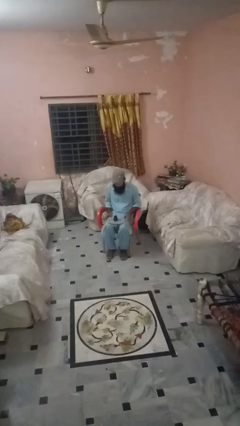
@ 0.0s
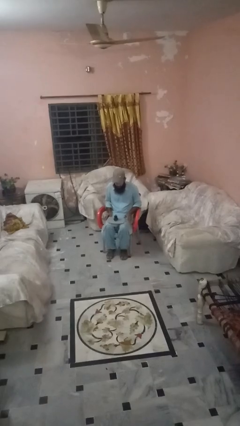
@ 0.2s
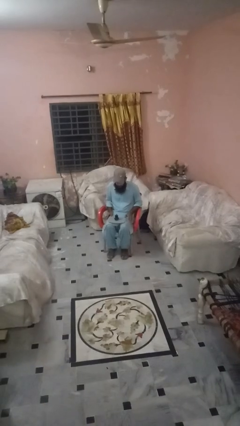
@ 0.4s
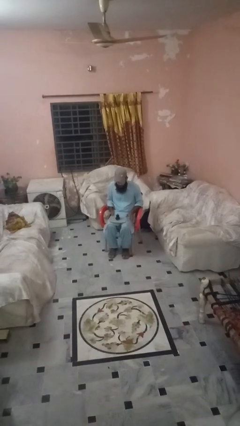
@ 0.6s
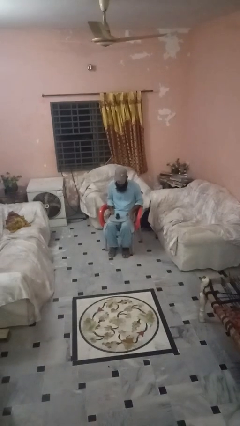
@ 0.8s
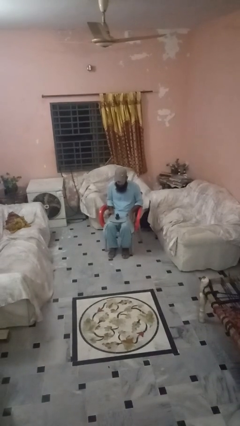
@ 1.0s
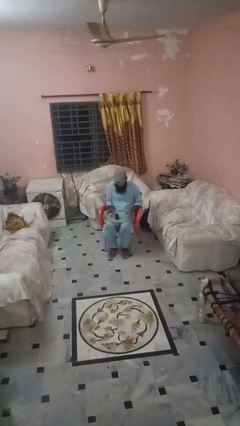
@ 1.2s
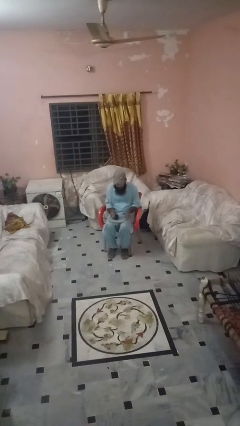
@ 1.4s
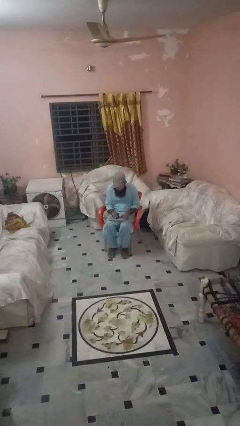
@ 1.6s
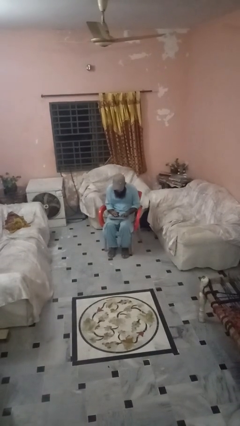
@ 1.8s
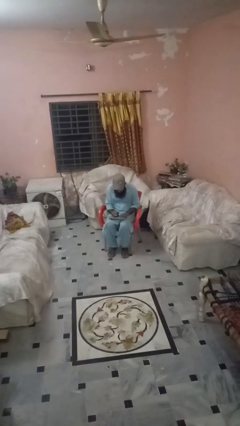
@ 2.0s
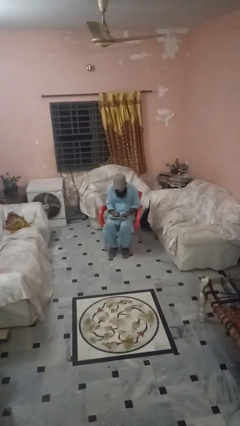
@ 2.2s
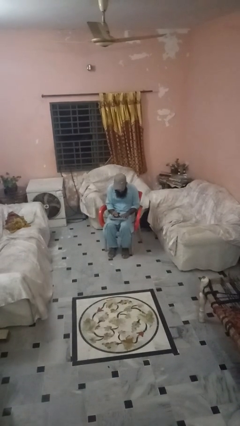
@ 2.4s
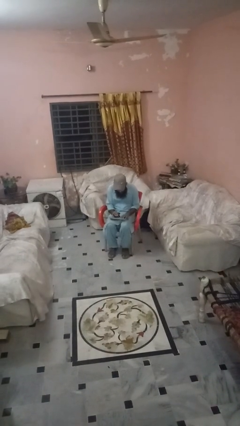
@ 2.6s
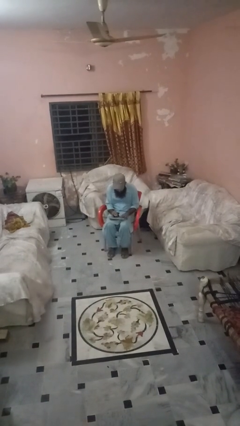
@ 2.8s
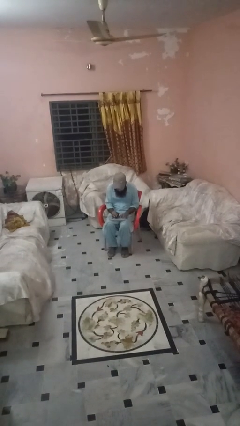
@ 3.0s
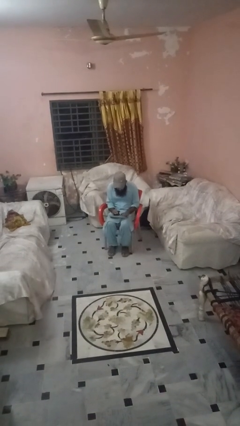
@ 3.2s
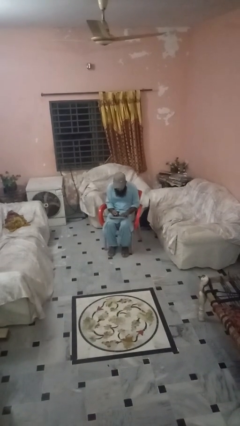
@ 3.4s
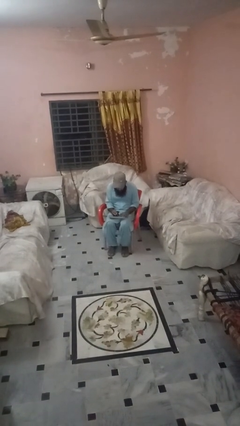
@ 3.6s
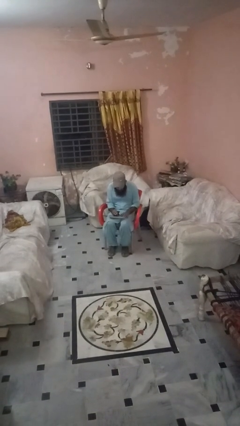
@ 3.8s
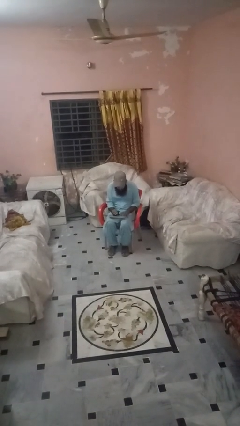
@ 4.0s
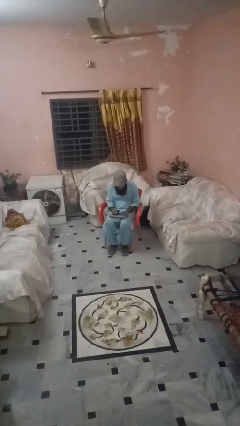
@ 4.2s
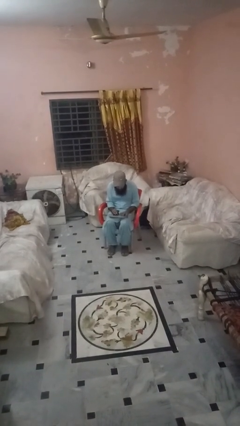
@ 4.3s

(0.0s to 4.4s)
person interacts with handheld game

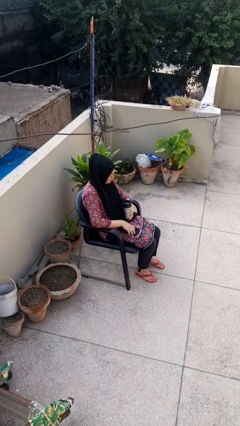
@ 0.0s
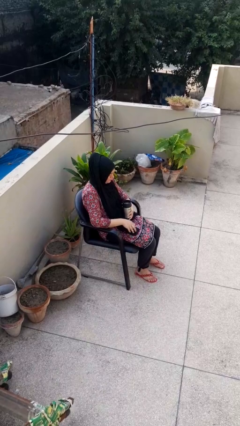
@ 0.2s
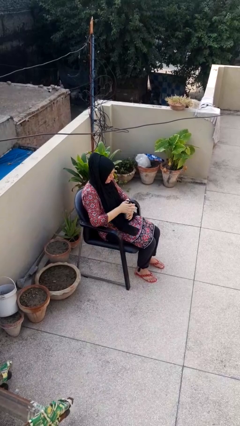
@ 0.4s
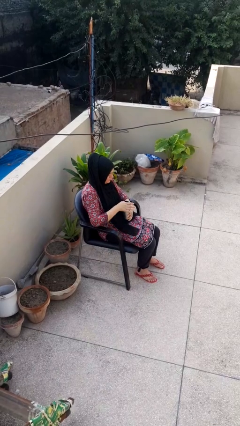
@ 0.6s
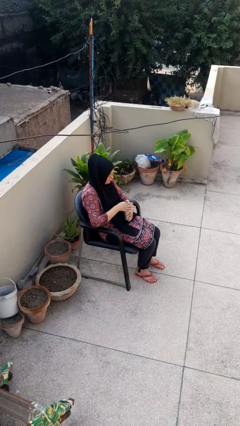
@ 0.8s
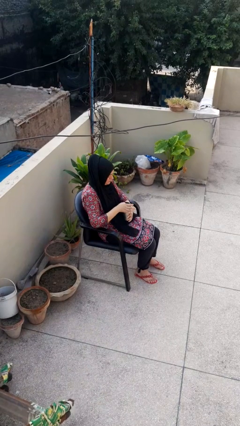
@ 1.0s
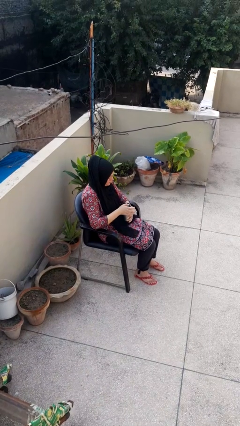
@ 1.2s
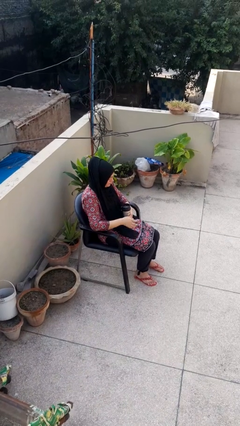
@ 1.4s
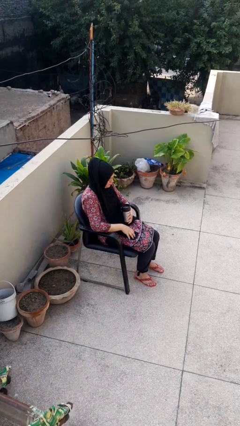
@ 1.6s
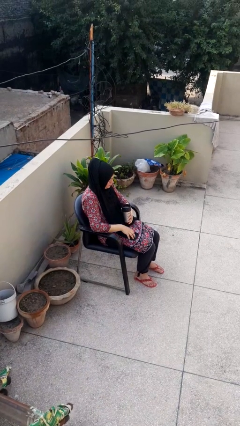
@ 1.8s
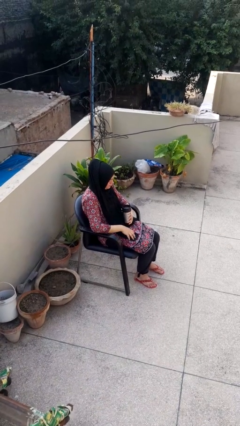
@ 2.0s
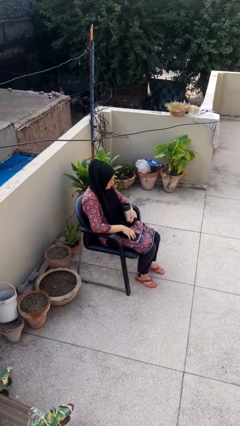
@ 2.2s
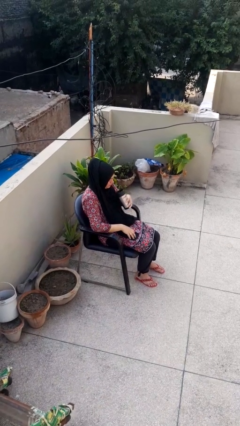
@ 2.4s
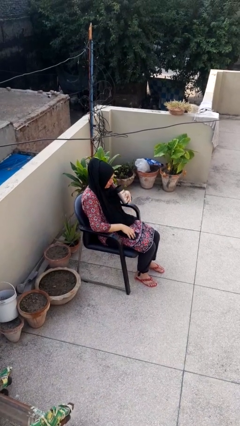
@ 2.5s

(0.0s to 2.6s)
person opens beverage can

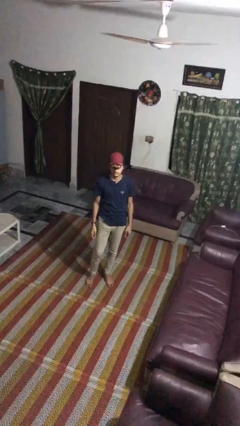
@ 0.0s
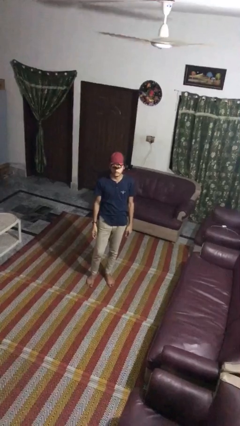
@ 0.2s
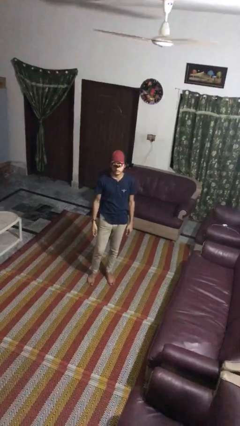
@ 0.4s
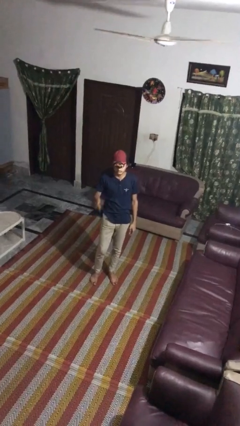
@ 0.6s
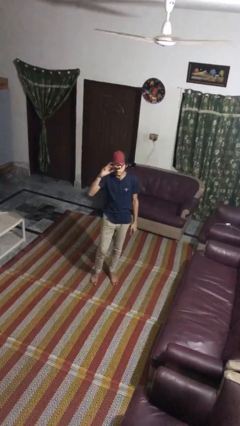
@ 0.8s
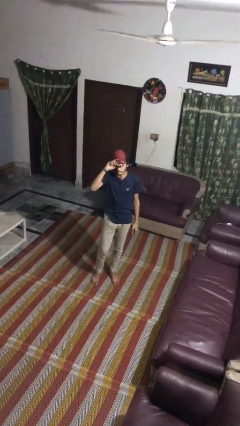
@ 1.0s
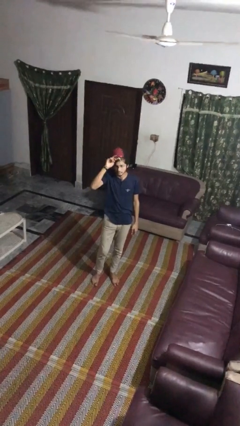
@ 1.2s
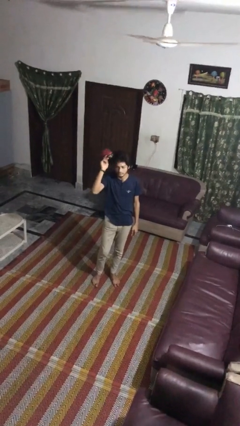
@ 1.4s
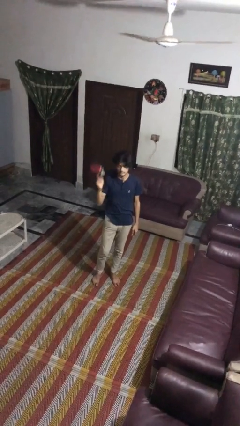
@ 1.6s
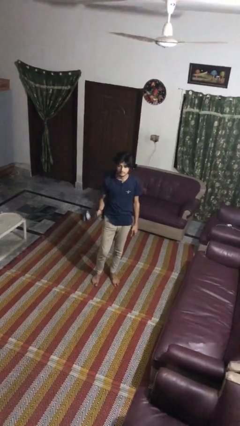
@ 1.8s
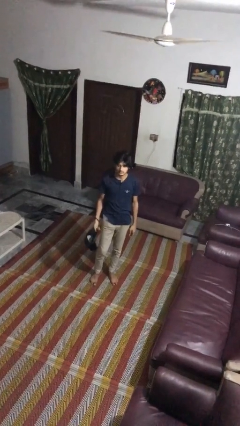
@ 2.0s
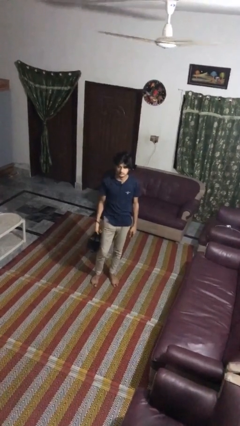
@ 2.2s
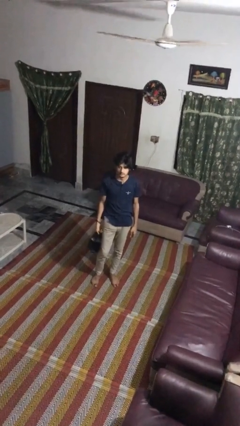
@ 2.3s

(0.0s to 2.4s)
person takes off hat

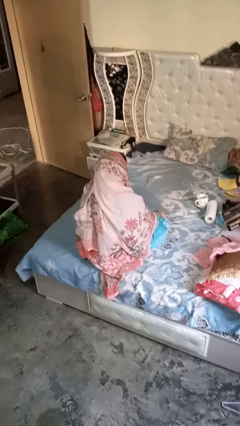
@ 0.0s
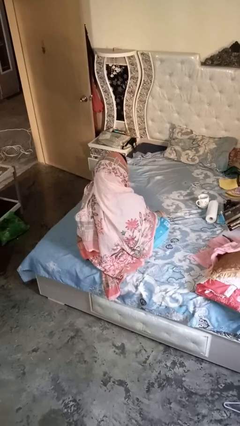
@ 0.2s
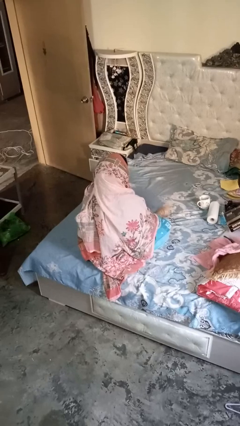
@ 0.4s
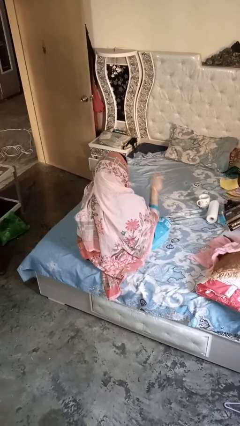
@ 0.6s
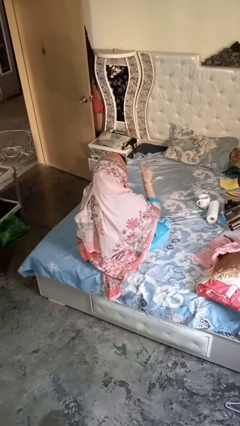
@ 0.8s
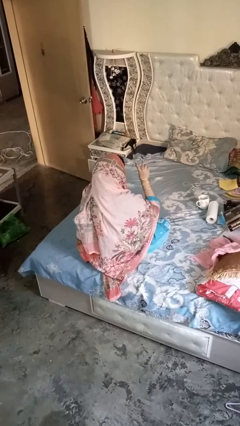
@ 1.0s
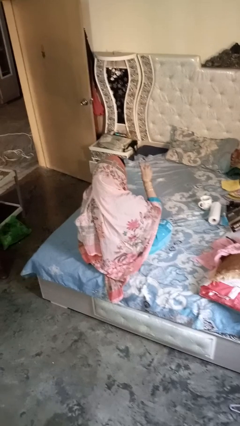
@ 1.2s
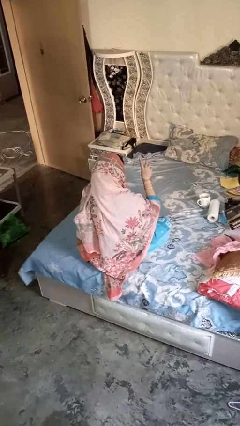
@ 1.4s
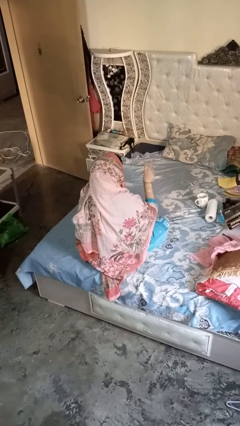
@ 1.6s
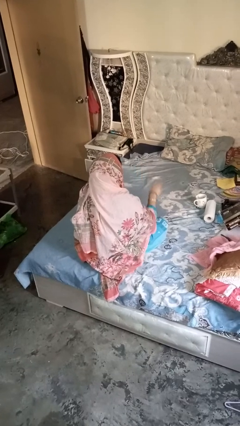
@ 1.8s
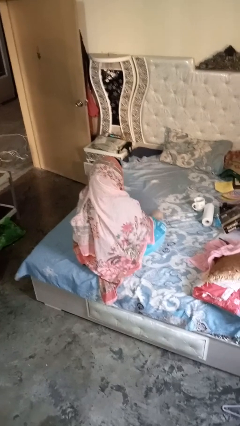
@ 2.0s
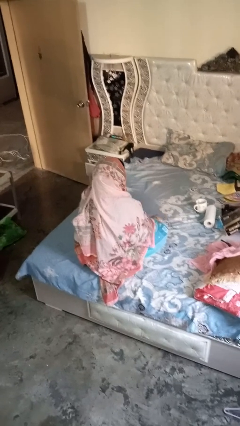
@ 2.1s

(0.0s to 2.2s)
person gestures be quiet

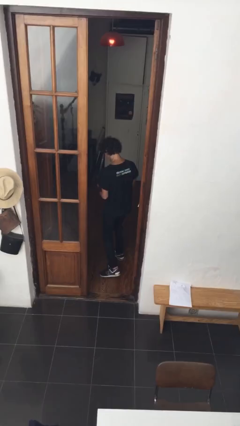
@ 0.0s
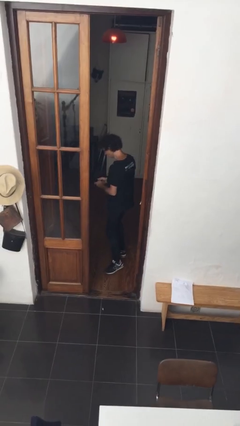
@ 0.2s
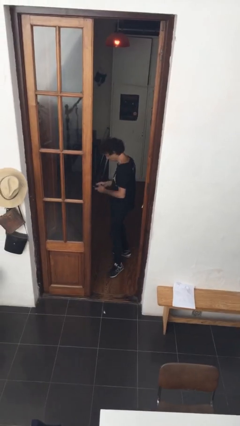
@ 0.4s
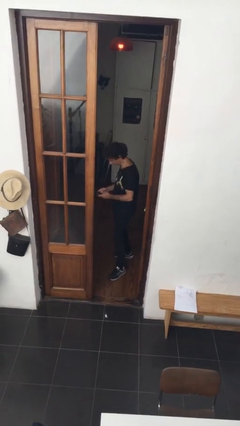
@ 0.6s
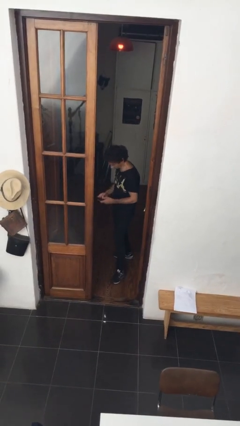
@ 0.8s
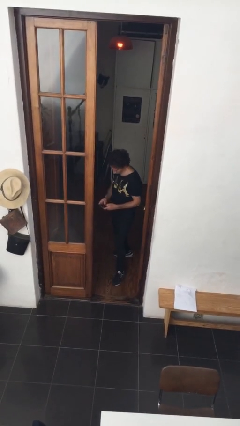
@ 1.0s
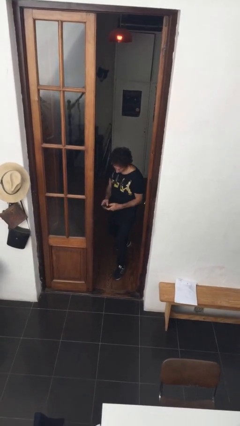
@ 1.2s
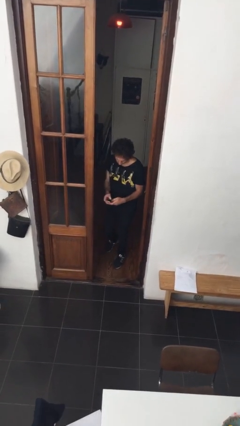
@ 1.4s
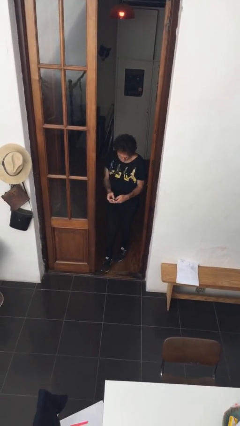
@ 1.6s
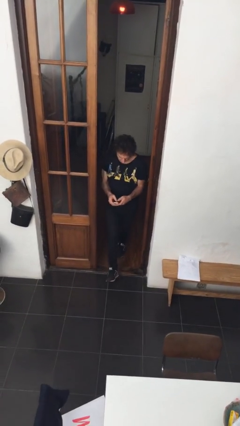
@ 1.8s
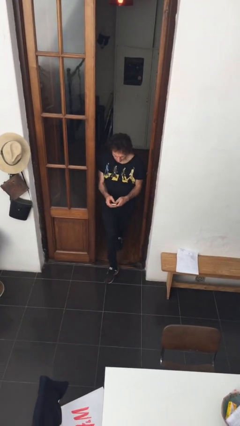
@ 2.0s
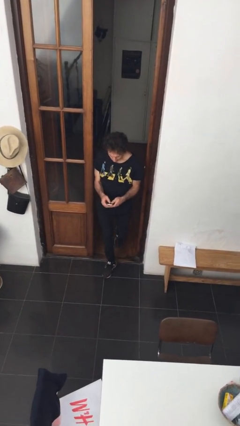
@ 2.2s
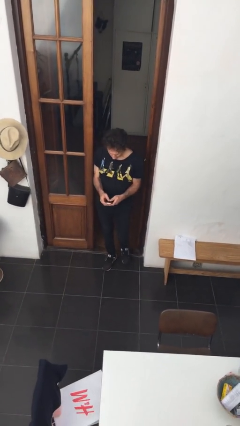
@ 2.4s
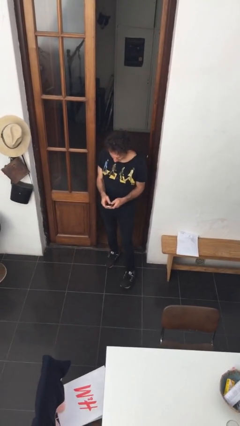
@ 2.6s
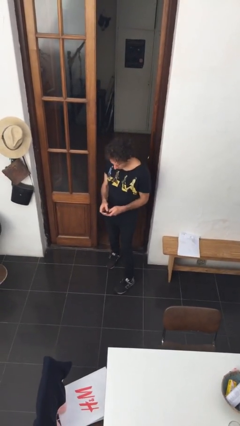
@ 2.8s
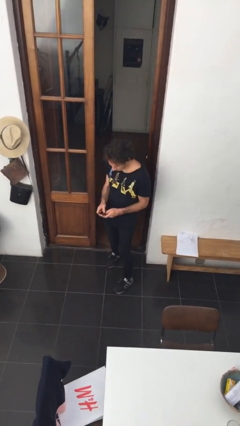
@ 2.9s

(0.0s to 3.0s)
person enters scene through structure

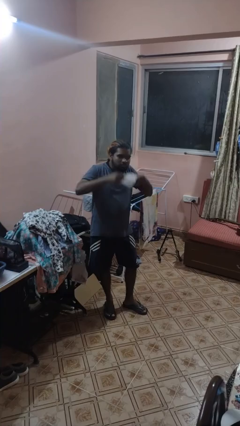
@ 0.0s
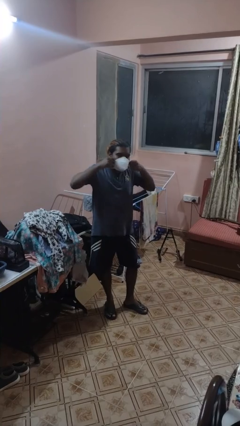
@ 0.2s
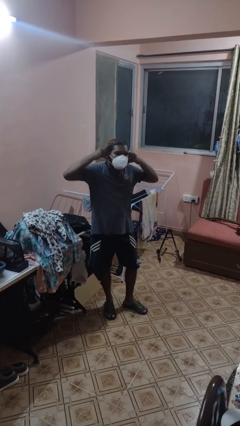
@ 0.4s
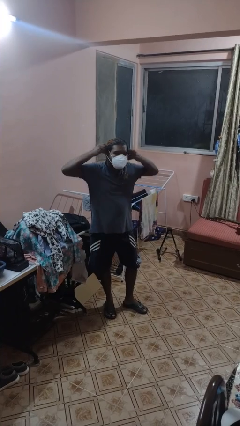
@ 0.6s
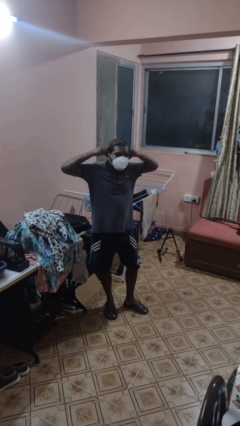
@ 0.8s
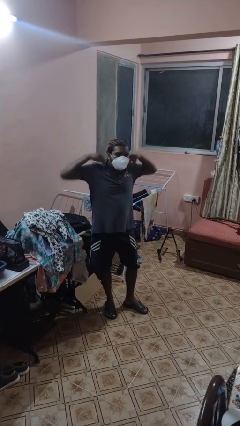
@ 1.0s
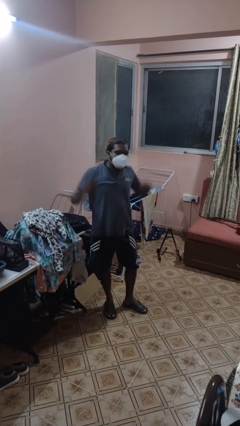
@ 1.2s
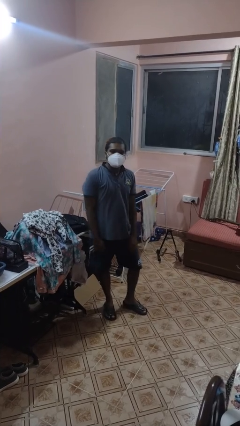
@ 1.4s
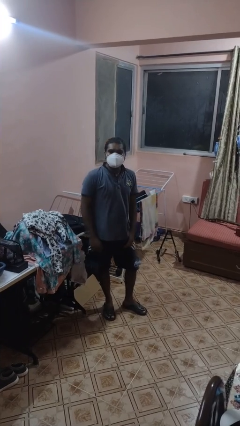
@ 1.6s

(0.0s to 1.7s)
person puts on facemask

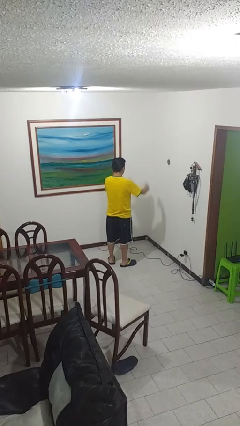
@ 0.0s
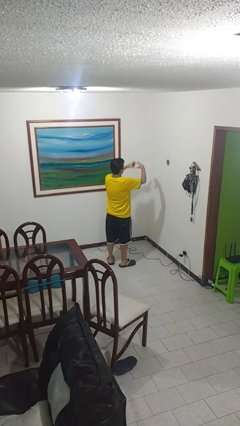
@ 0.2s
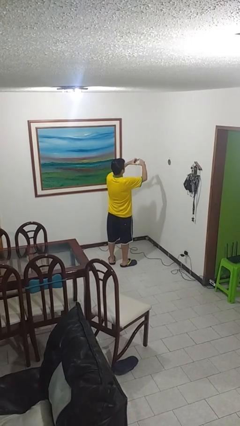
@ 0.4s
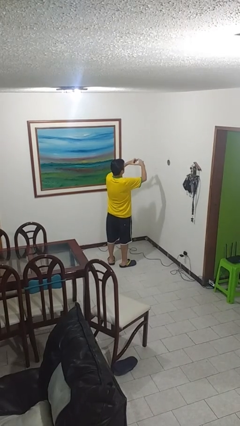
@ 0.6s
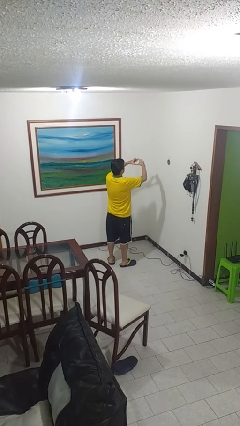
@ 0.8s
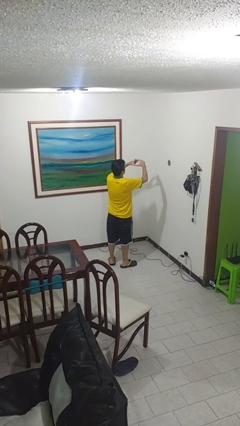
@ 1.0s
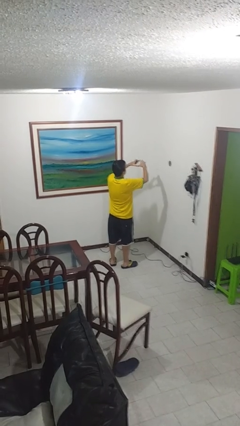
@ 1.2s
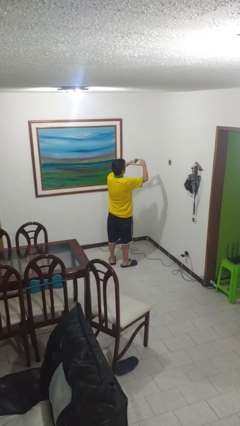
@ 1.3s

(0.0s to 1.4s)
person gestures heart
